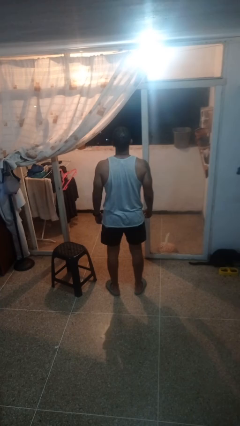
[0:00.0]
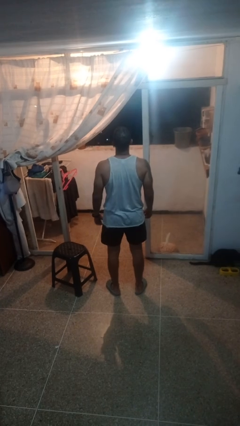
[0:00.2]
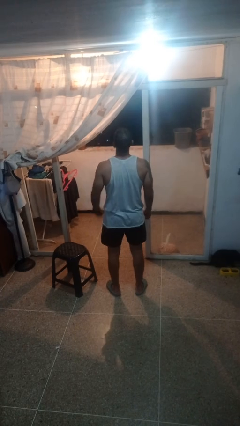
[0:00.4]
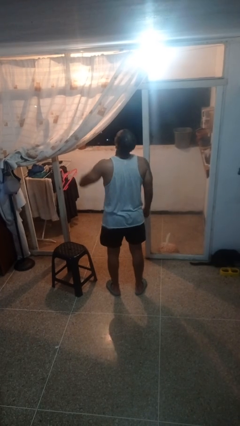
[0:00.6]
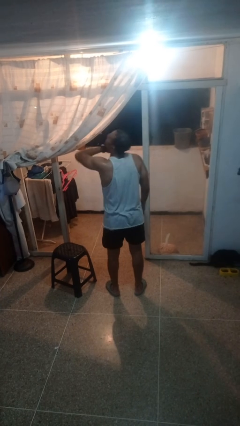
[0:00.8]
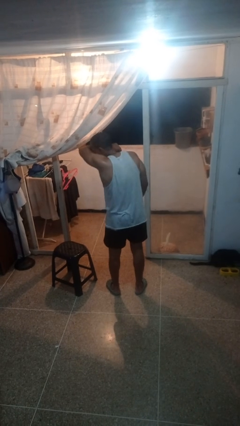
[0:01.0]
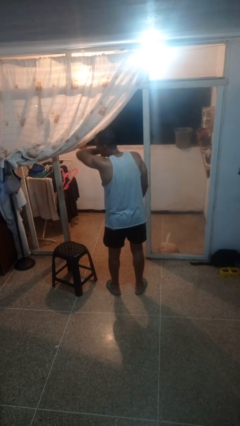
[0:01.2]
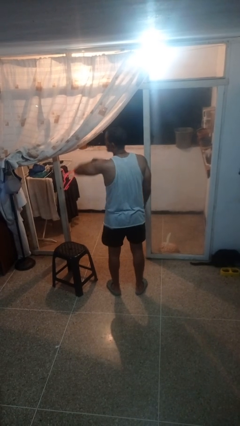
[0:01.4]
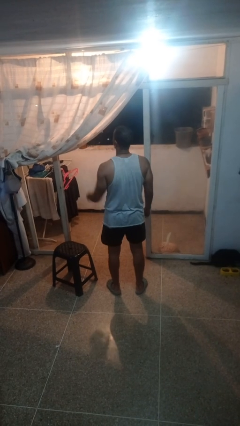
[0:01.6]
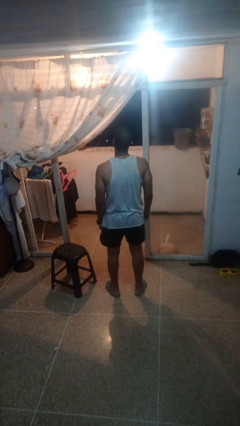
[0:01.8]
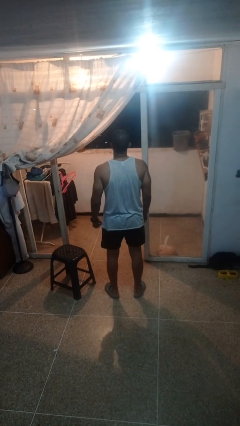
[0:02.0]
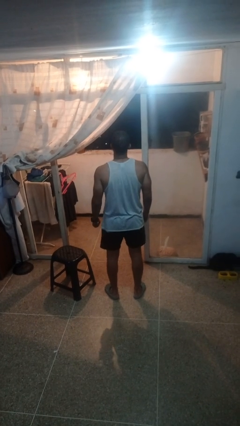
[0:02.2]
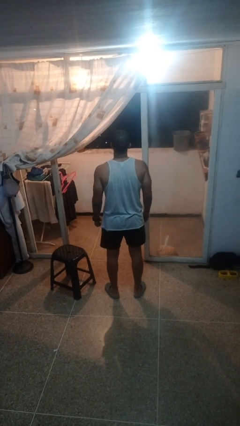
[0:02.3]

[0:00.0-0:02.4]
person sneezes into arm

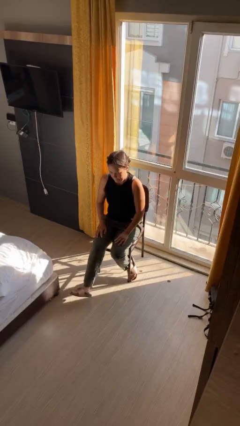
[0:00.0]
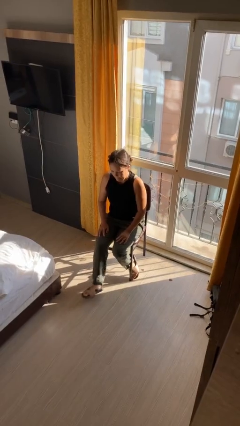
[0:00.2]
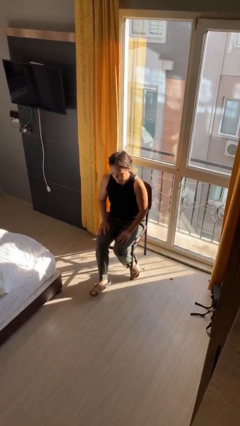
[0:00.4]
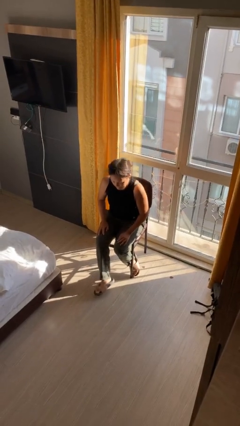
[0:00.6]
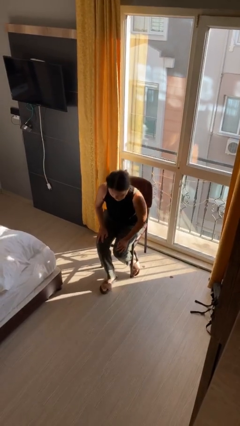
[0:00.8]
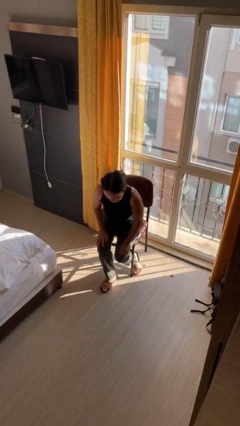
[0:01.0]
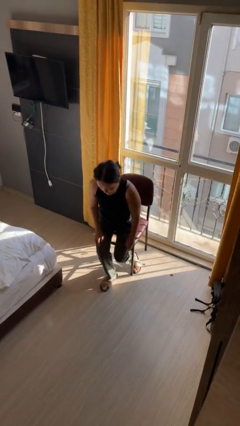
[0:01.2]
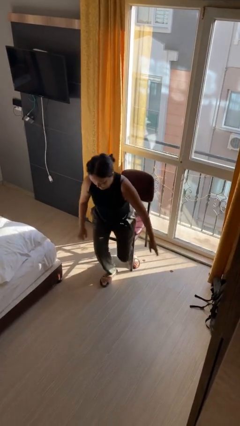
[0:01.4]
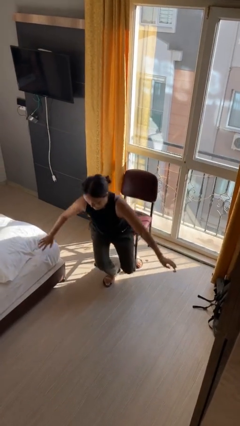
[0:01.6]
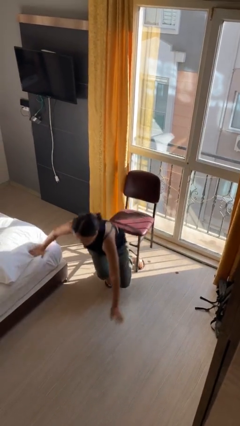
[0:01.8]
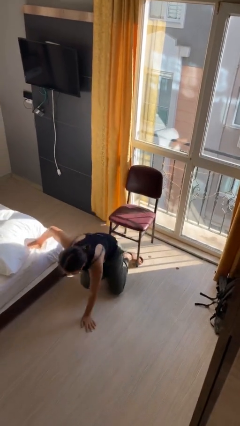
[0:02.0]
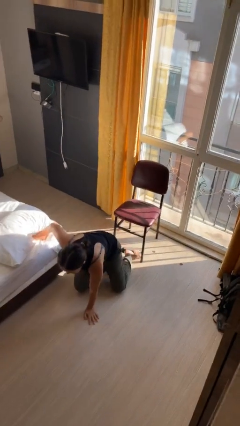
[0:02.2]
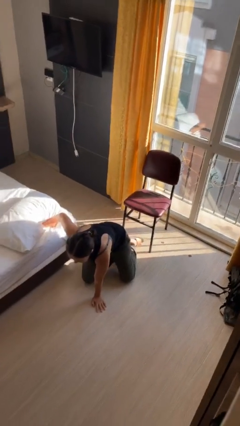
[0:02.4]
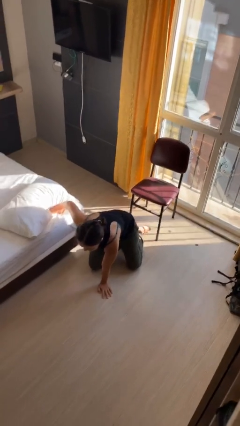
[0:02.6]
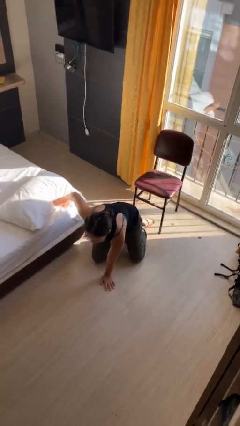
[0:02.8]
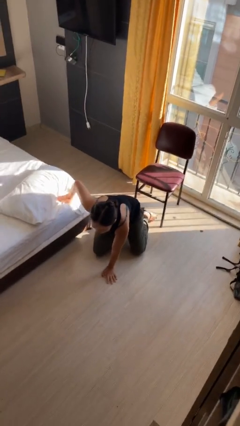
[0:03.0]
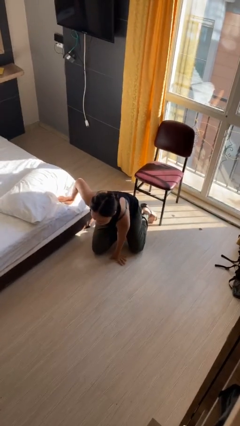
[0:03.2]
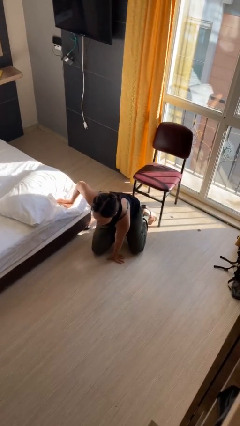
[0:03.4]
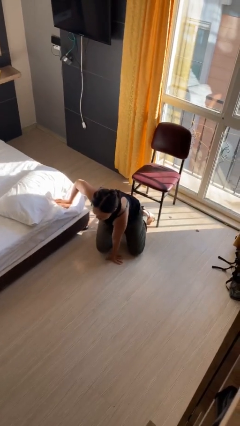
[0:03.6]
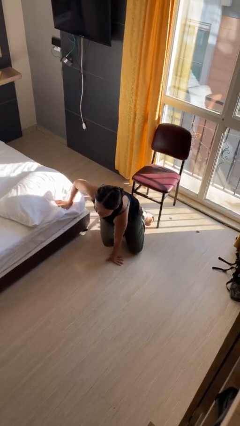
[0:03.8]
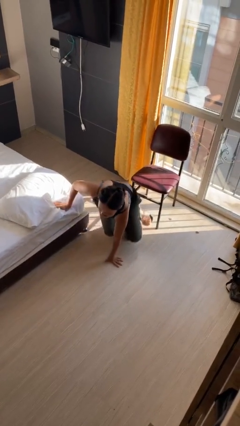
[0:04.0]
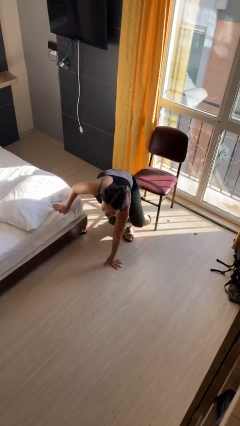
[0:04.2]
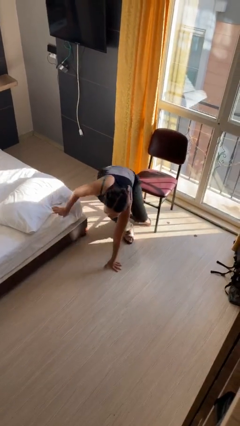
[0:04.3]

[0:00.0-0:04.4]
person falls from chair

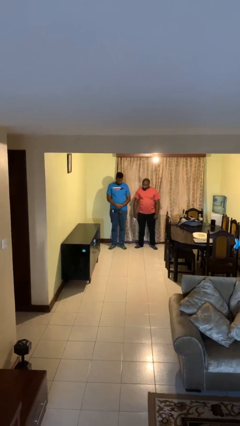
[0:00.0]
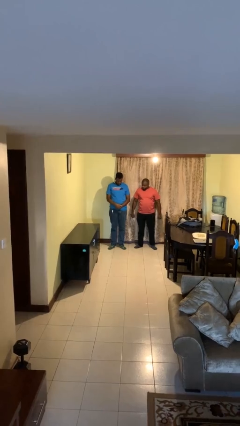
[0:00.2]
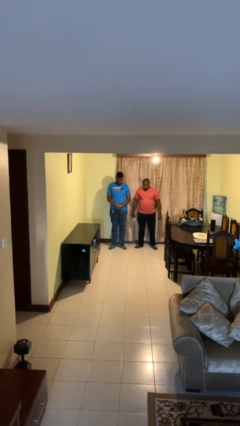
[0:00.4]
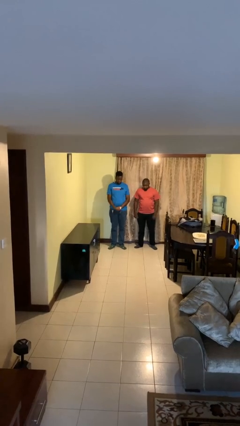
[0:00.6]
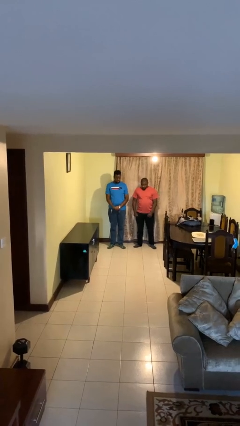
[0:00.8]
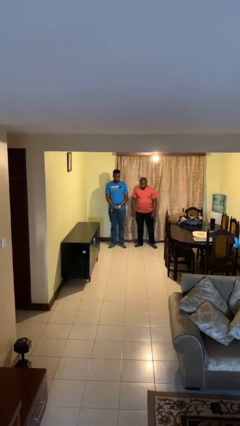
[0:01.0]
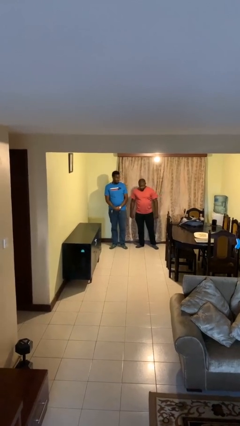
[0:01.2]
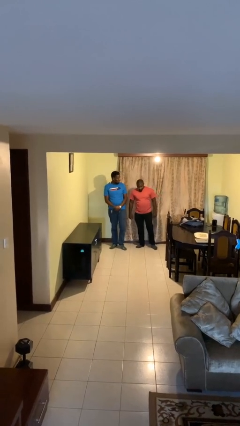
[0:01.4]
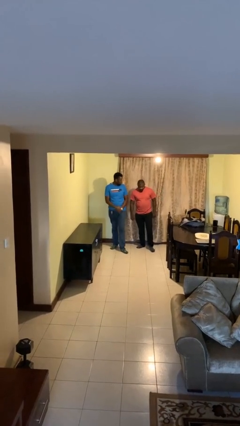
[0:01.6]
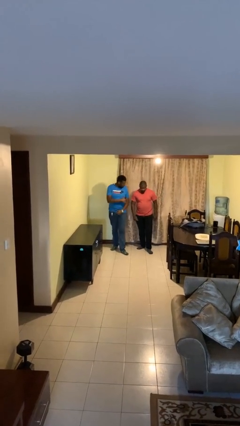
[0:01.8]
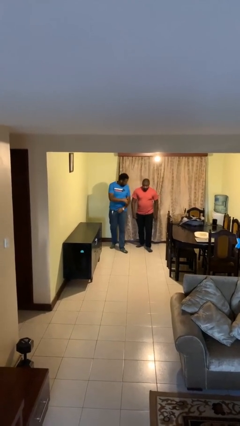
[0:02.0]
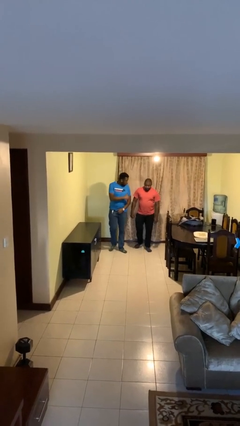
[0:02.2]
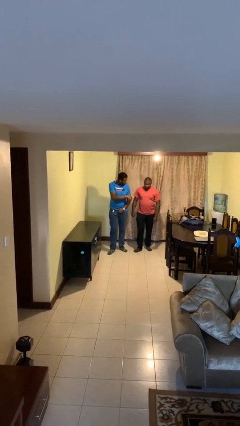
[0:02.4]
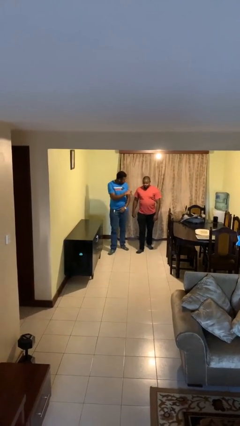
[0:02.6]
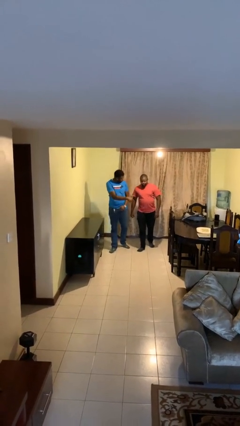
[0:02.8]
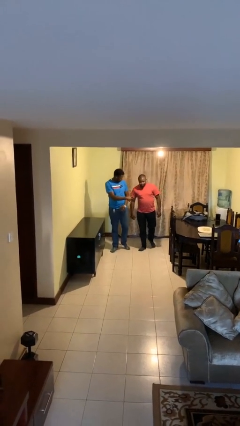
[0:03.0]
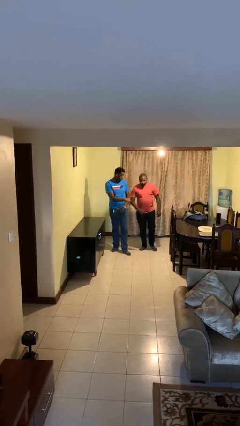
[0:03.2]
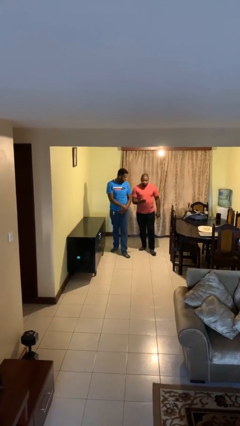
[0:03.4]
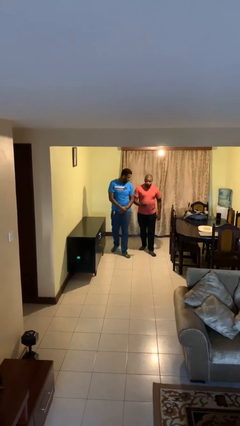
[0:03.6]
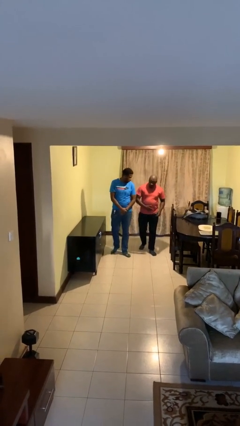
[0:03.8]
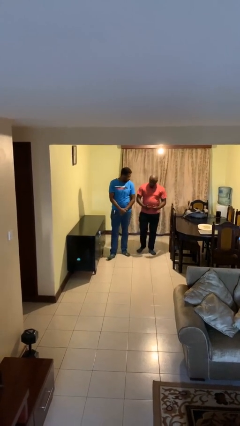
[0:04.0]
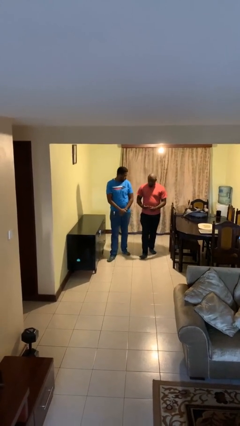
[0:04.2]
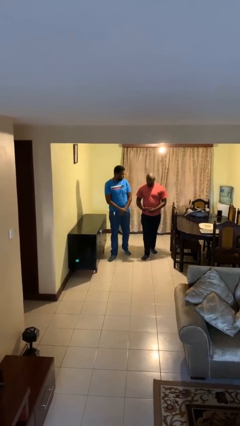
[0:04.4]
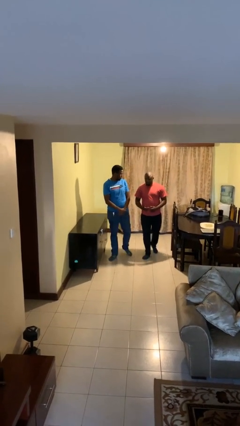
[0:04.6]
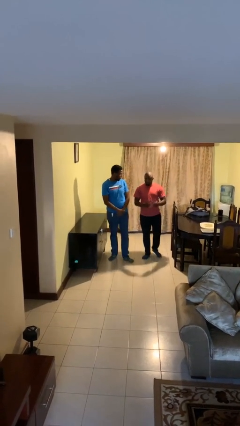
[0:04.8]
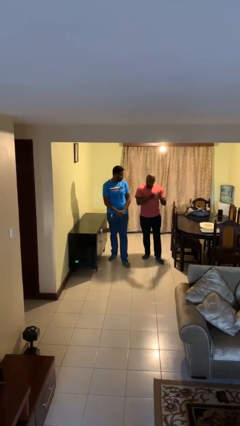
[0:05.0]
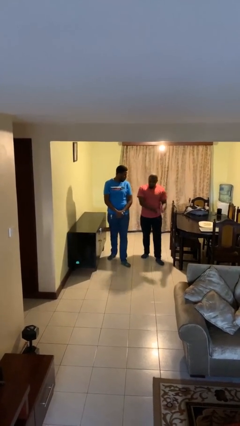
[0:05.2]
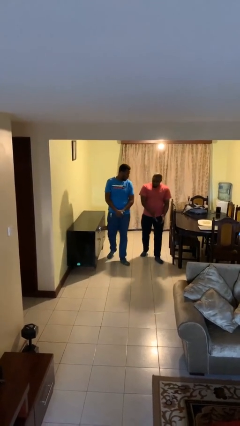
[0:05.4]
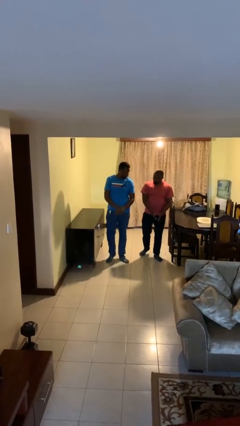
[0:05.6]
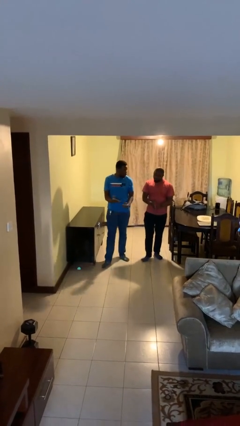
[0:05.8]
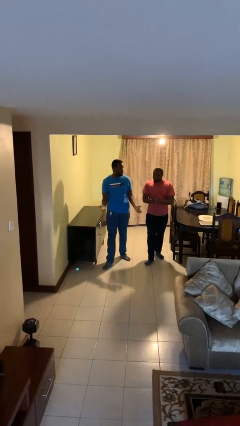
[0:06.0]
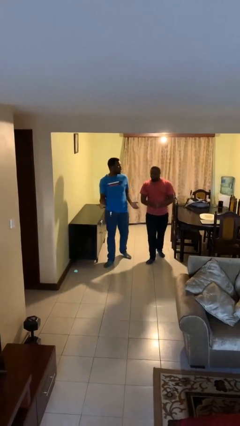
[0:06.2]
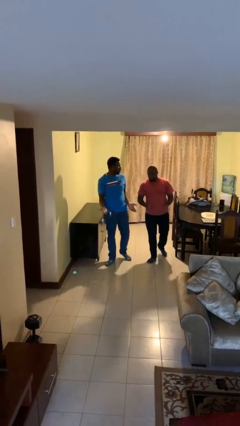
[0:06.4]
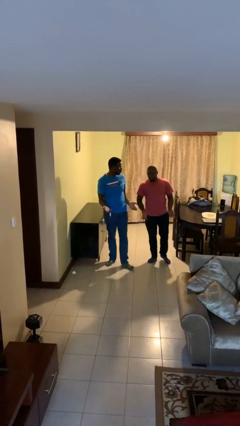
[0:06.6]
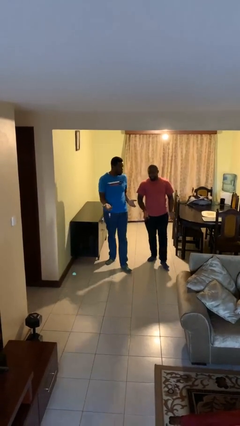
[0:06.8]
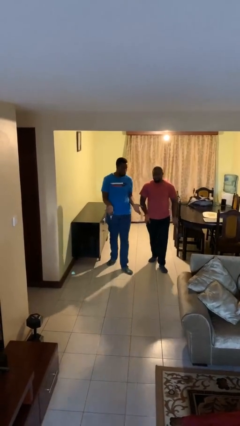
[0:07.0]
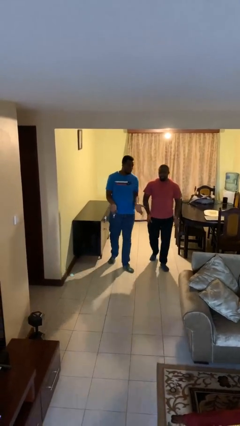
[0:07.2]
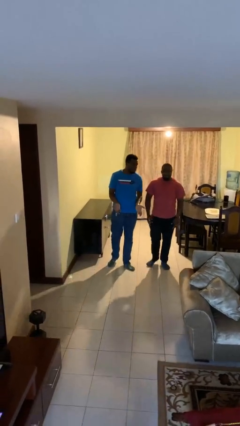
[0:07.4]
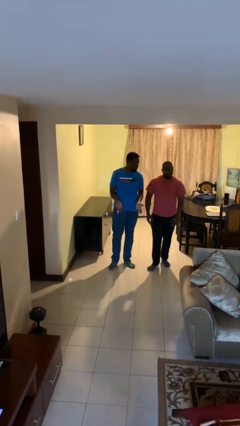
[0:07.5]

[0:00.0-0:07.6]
person talks to person

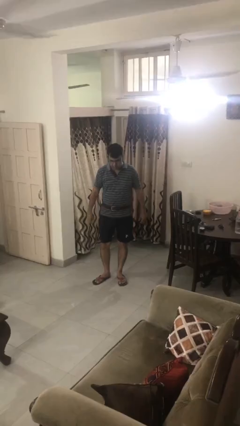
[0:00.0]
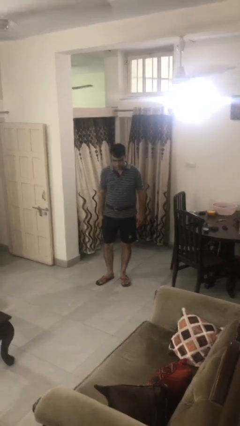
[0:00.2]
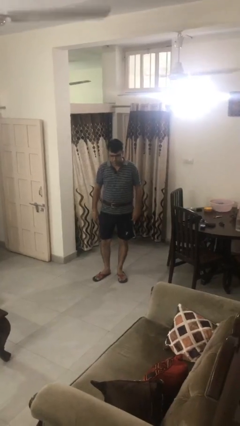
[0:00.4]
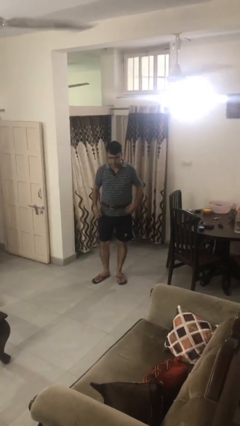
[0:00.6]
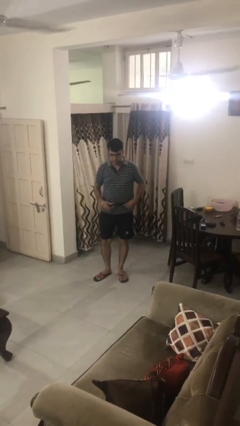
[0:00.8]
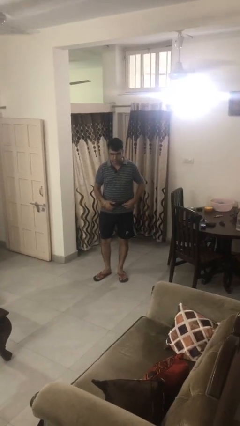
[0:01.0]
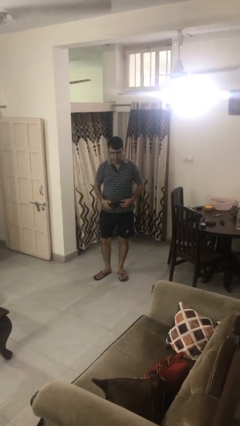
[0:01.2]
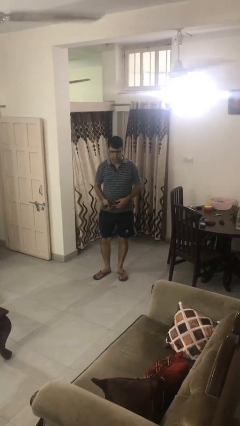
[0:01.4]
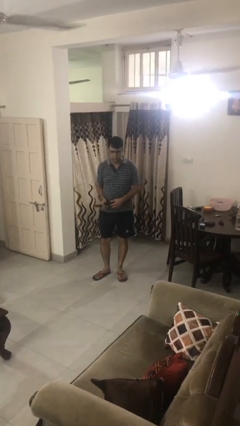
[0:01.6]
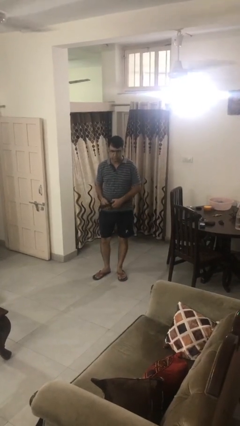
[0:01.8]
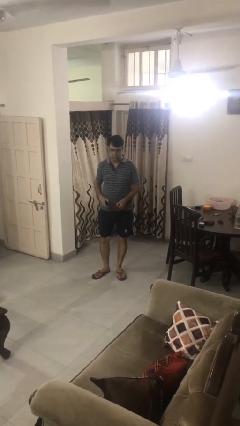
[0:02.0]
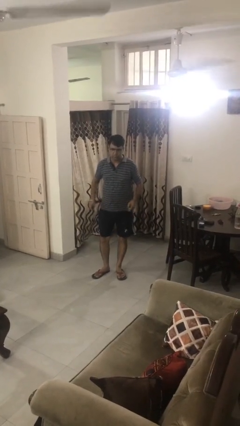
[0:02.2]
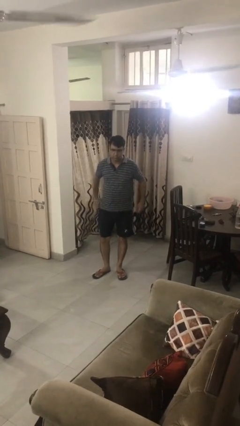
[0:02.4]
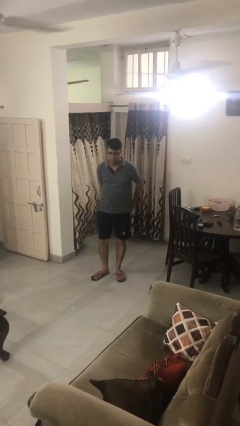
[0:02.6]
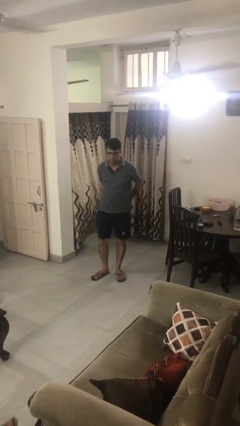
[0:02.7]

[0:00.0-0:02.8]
person takes off belt

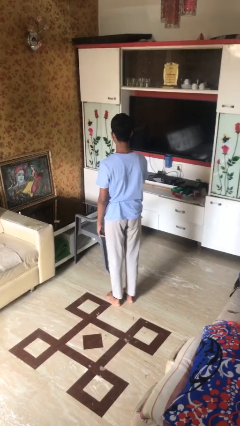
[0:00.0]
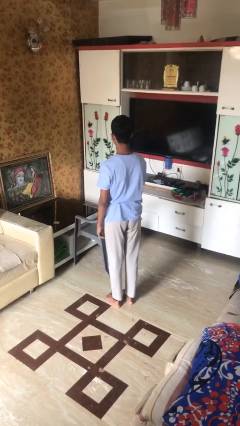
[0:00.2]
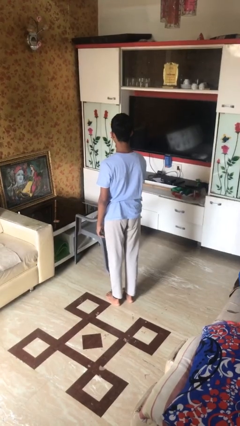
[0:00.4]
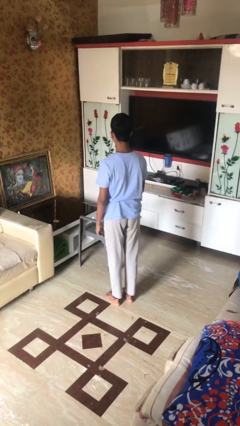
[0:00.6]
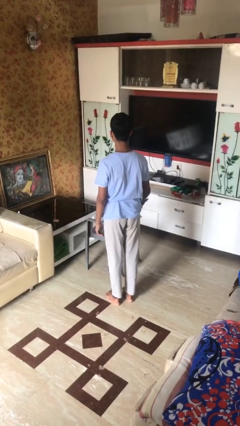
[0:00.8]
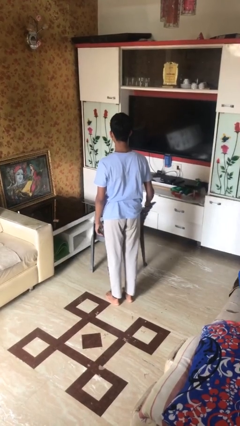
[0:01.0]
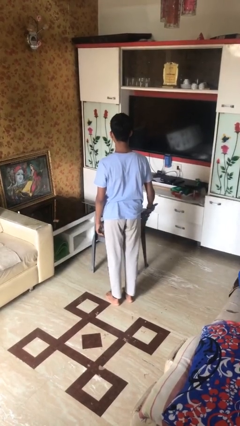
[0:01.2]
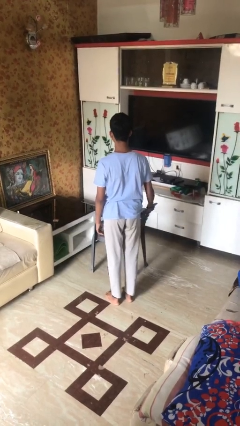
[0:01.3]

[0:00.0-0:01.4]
person pulls out chair
